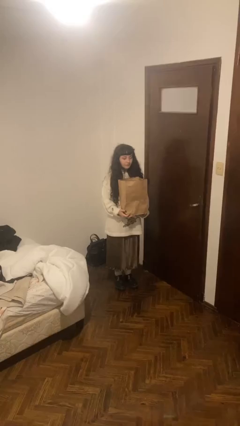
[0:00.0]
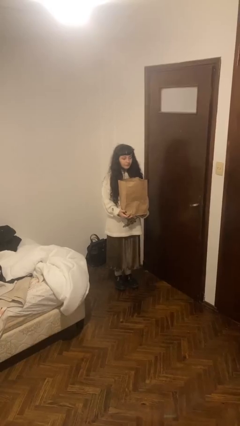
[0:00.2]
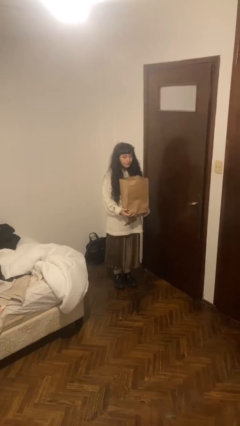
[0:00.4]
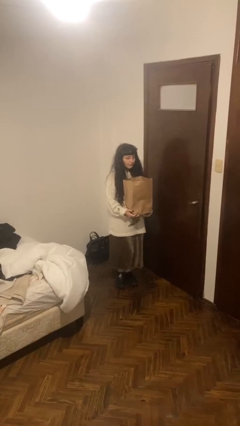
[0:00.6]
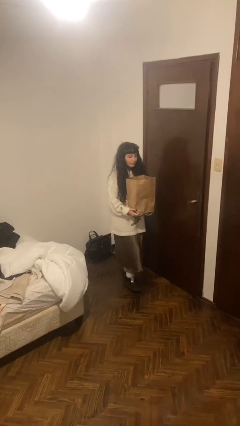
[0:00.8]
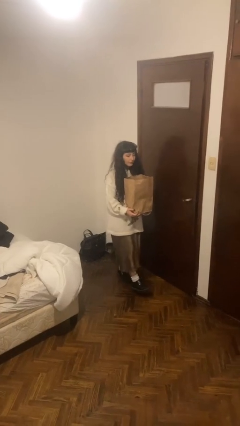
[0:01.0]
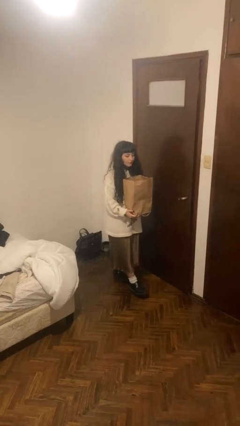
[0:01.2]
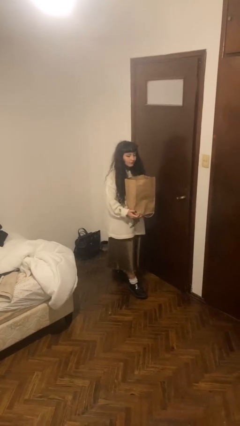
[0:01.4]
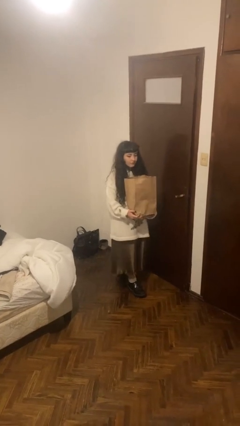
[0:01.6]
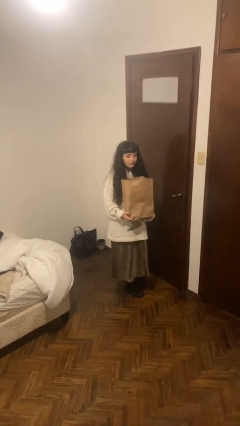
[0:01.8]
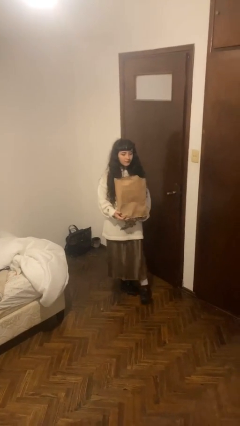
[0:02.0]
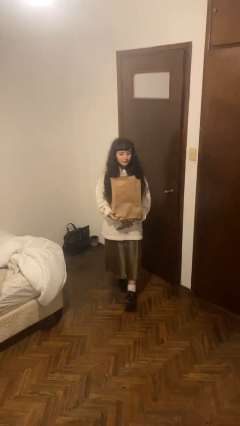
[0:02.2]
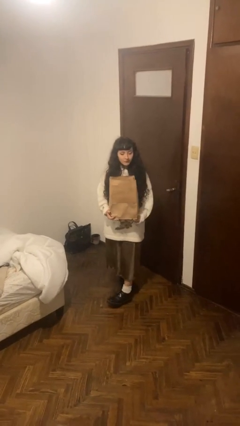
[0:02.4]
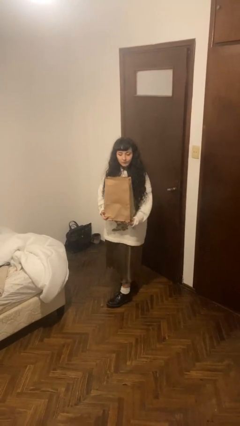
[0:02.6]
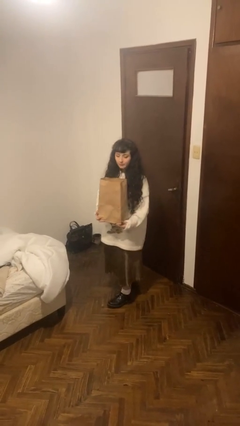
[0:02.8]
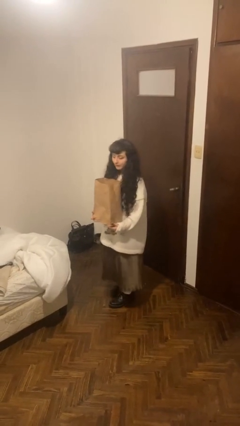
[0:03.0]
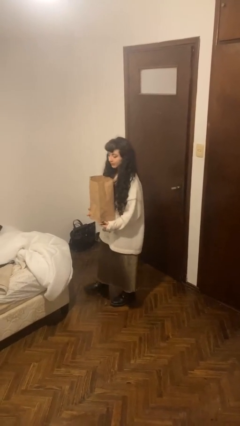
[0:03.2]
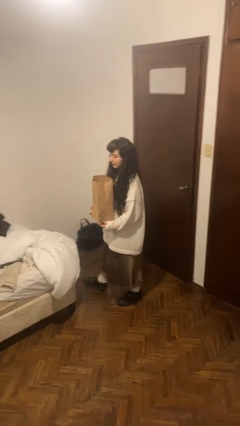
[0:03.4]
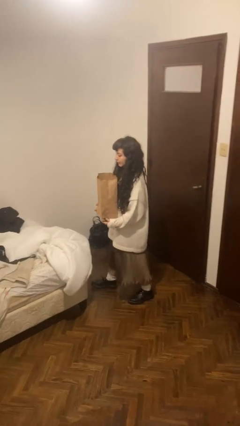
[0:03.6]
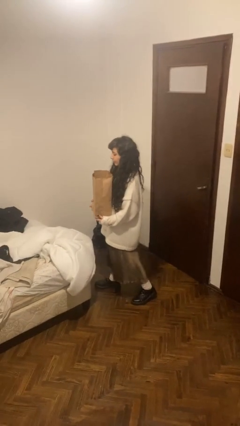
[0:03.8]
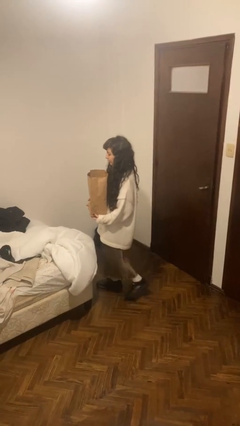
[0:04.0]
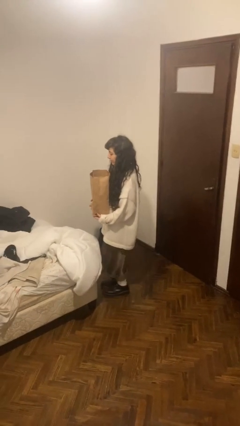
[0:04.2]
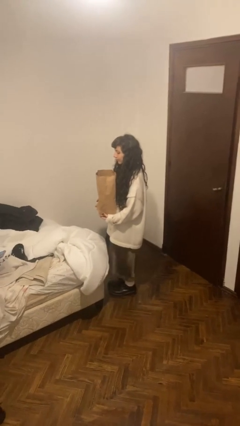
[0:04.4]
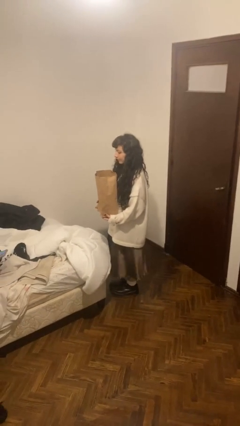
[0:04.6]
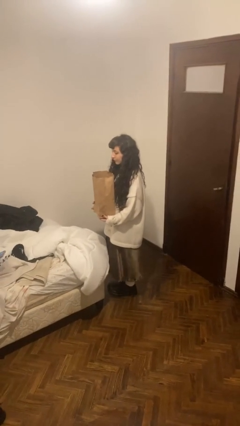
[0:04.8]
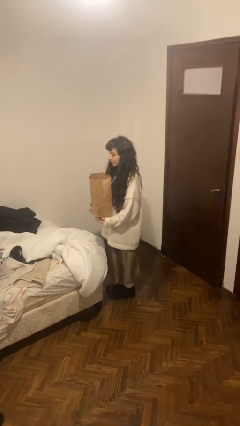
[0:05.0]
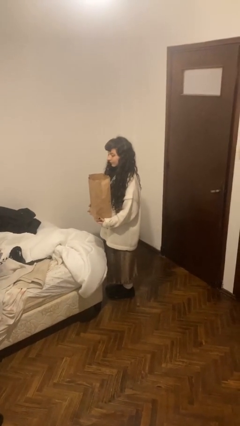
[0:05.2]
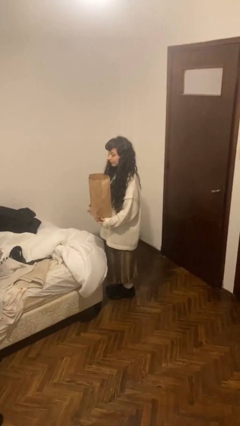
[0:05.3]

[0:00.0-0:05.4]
person carries groceries

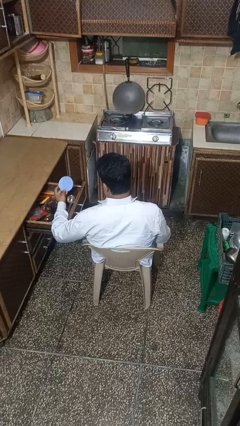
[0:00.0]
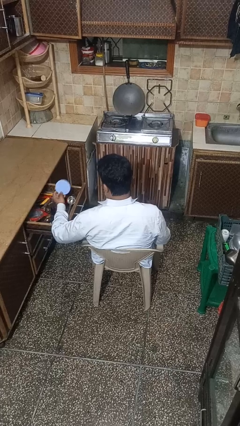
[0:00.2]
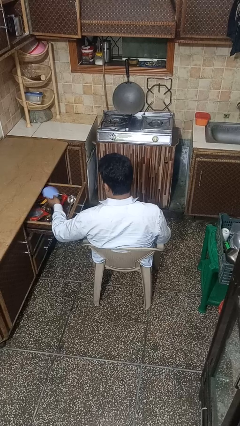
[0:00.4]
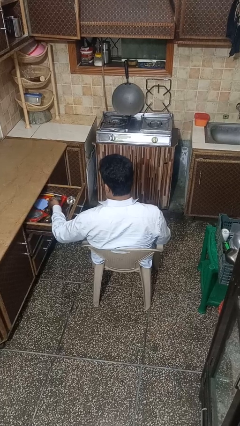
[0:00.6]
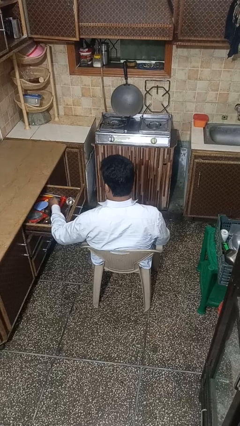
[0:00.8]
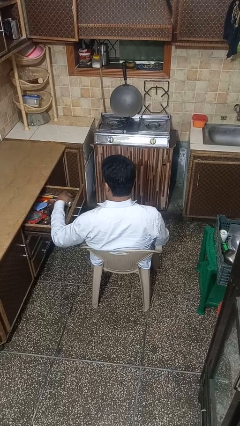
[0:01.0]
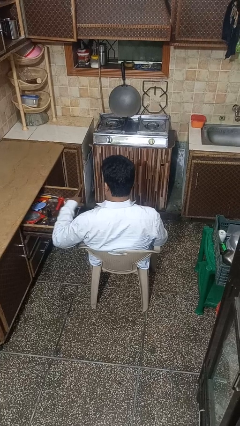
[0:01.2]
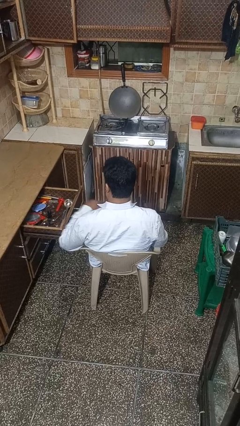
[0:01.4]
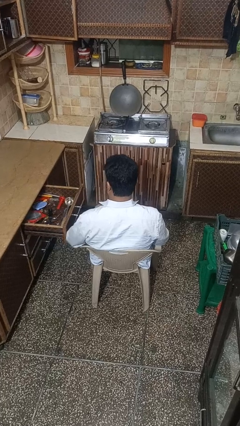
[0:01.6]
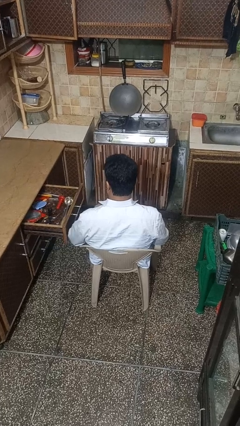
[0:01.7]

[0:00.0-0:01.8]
person puts object into kitchen drawer

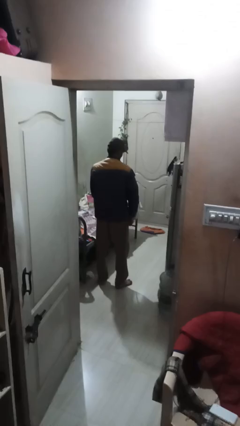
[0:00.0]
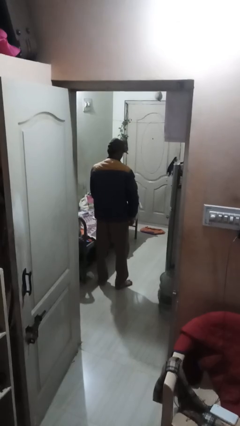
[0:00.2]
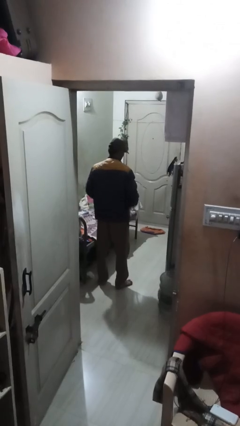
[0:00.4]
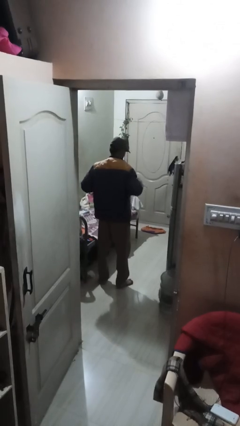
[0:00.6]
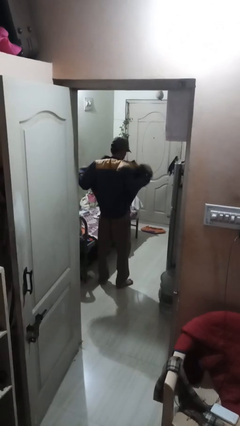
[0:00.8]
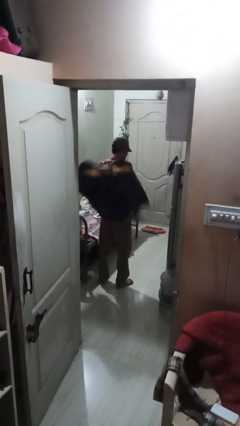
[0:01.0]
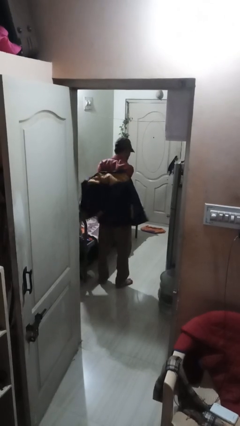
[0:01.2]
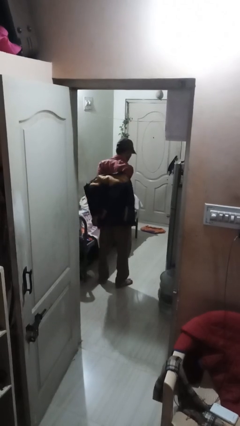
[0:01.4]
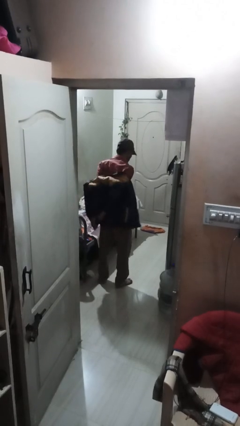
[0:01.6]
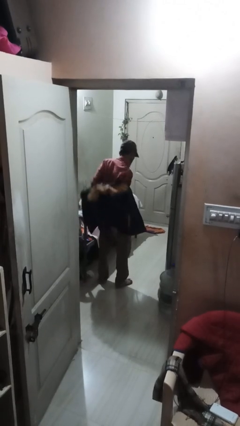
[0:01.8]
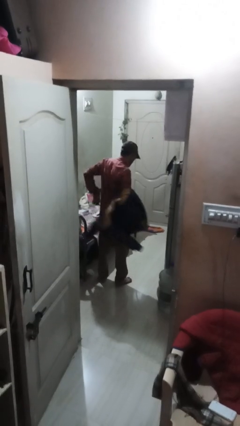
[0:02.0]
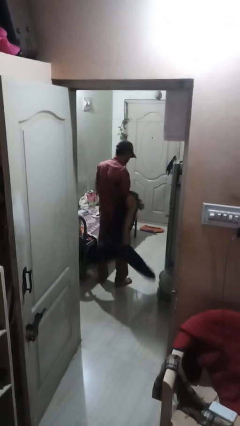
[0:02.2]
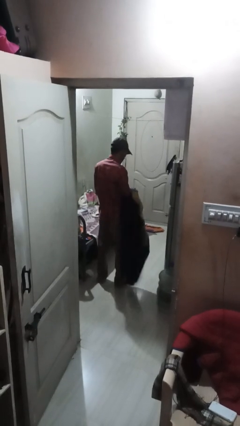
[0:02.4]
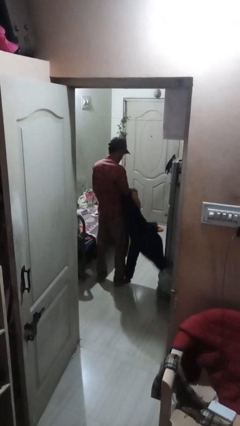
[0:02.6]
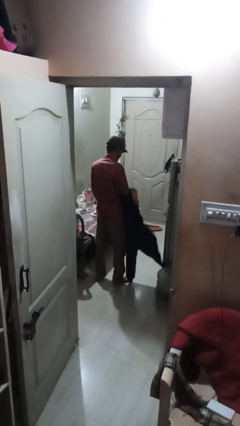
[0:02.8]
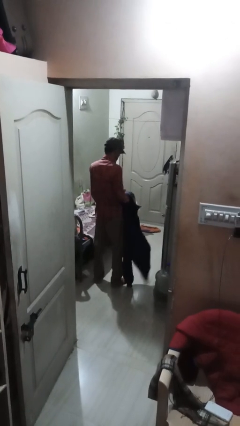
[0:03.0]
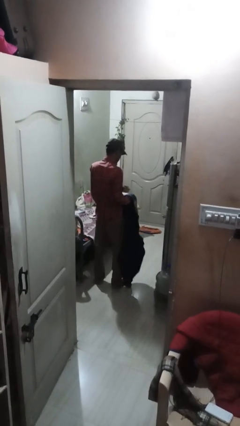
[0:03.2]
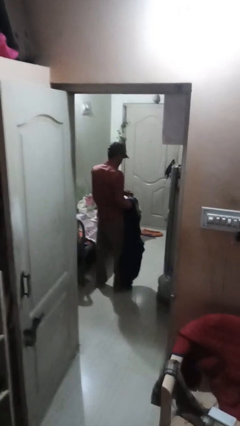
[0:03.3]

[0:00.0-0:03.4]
person takes off jacket

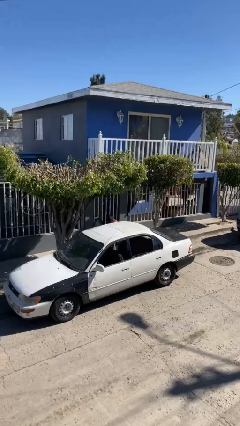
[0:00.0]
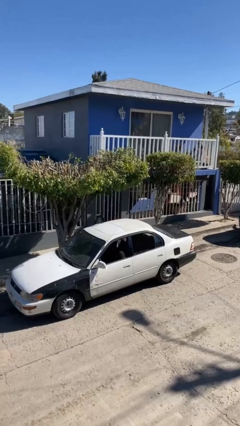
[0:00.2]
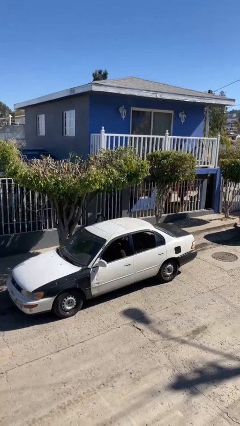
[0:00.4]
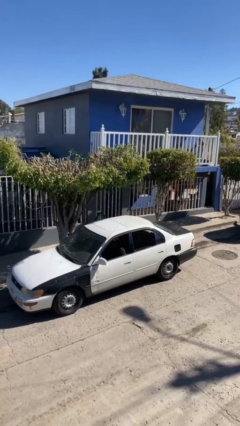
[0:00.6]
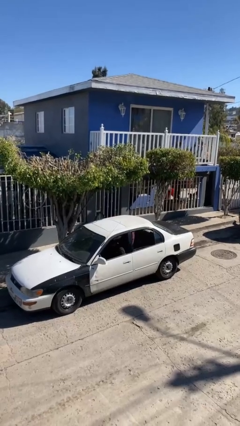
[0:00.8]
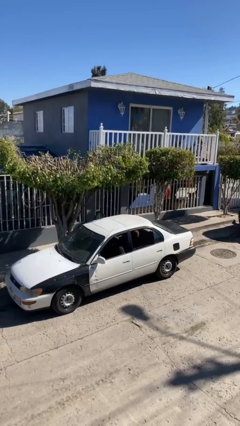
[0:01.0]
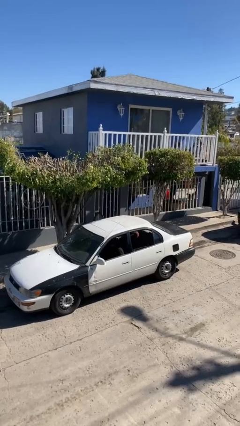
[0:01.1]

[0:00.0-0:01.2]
person enters car

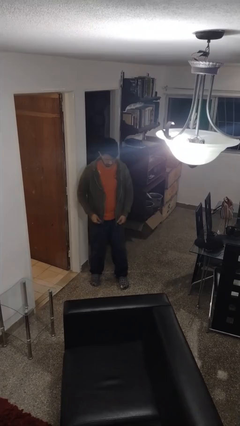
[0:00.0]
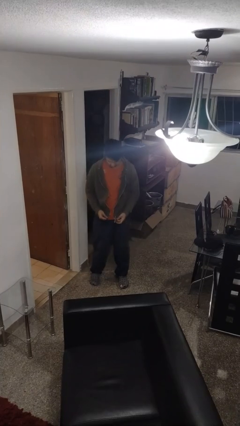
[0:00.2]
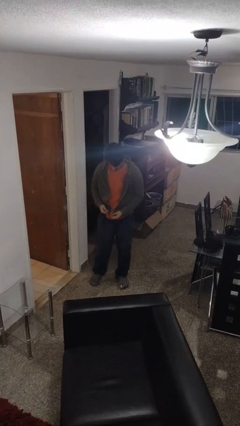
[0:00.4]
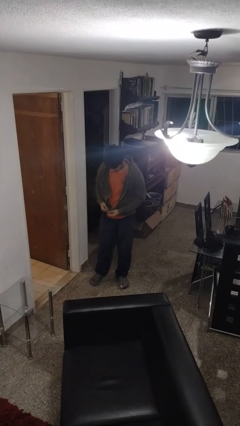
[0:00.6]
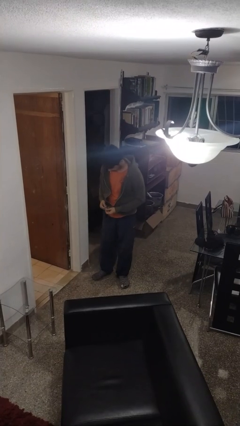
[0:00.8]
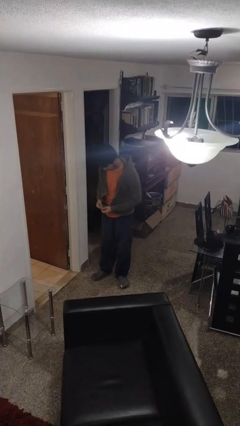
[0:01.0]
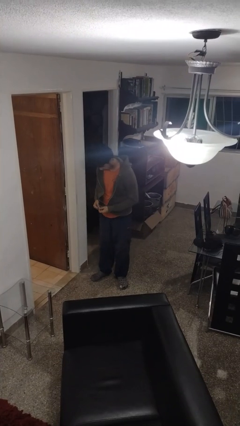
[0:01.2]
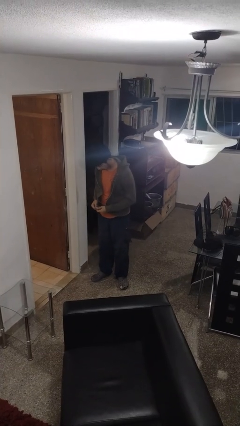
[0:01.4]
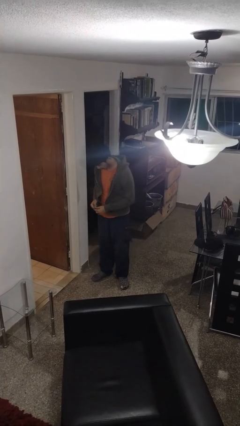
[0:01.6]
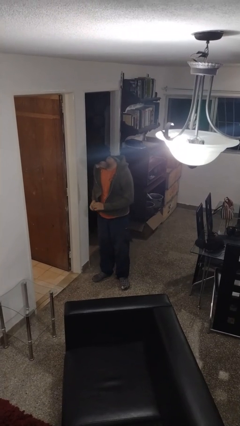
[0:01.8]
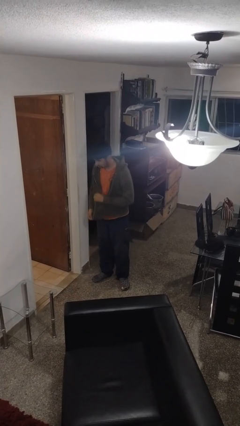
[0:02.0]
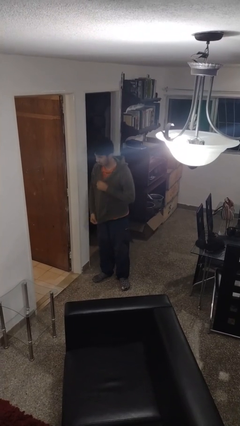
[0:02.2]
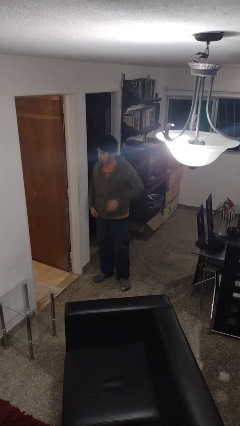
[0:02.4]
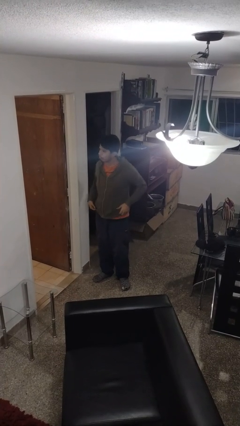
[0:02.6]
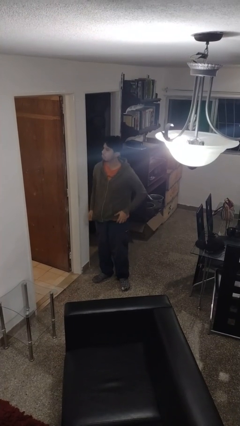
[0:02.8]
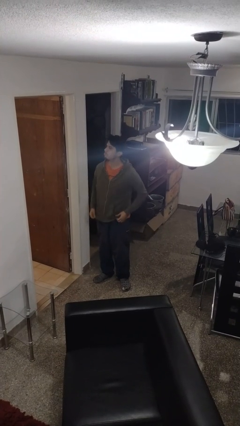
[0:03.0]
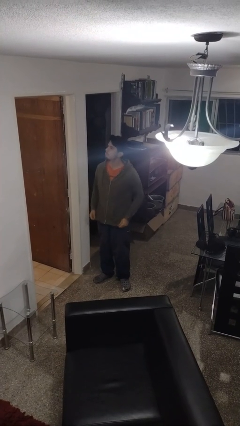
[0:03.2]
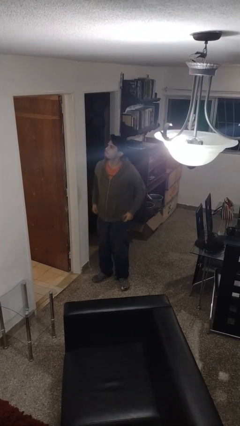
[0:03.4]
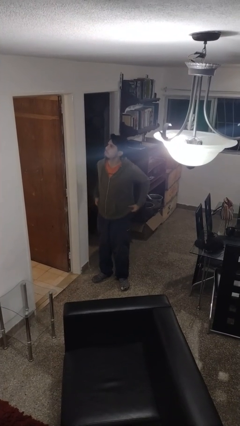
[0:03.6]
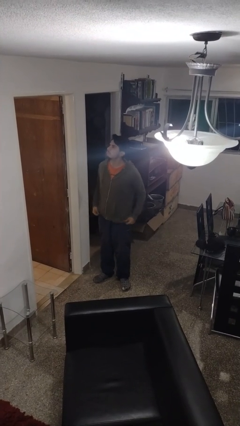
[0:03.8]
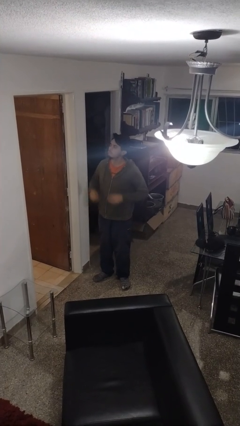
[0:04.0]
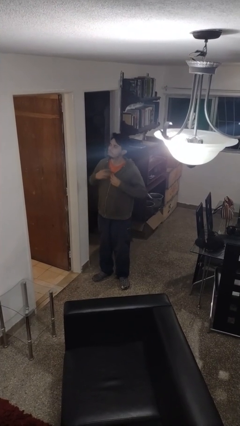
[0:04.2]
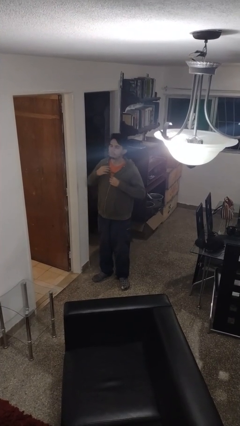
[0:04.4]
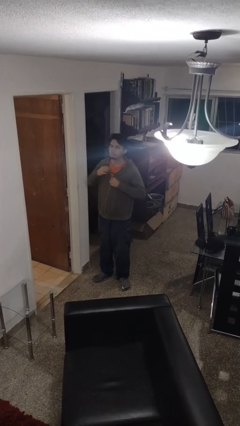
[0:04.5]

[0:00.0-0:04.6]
person zips up jacket

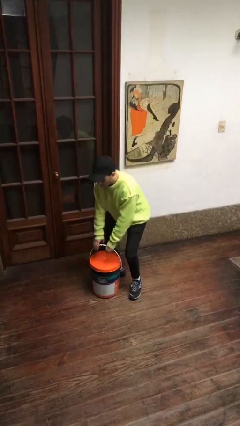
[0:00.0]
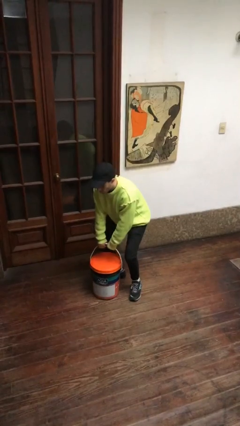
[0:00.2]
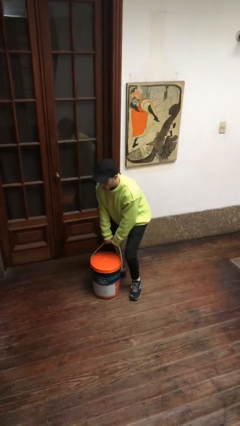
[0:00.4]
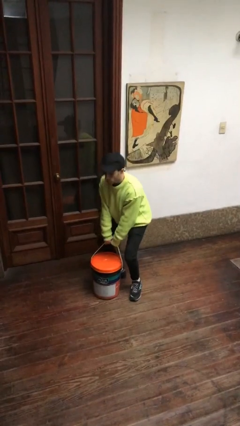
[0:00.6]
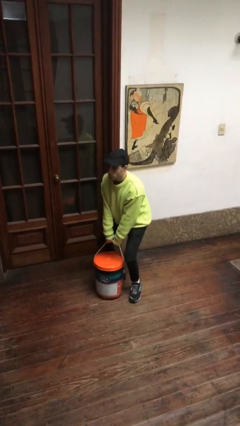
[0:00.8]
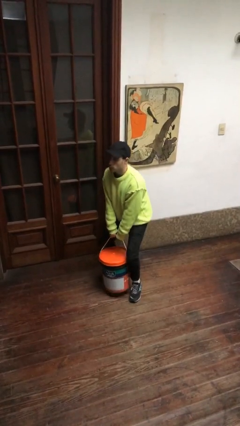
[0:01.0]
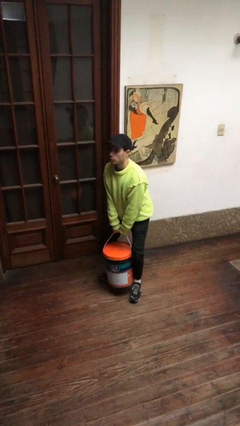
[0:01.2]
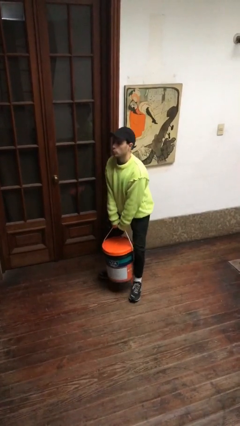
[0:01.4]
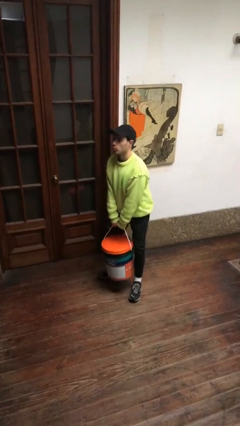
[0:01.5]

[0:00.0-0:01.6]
person picks up object from floor
